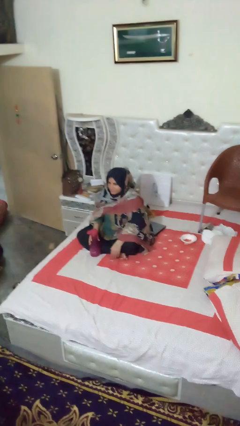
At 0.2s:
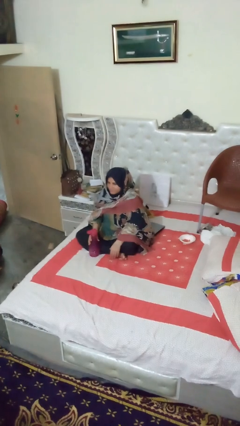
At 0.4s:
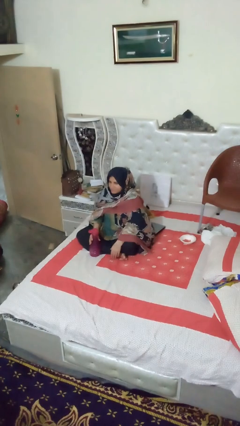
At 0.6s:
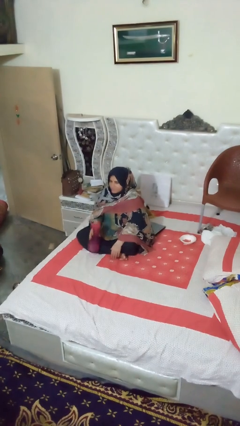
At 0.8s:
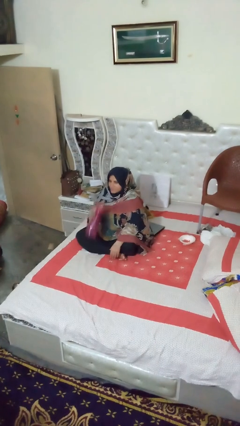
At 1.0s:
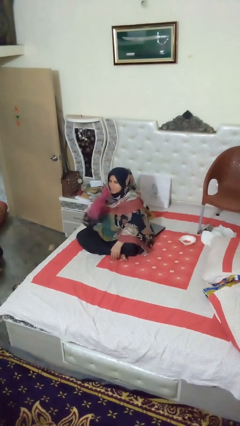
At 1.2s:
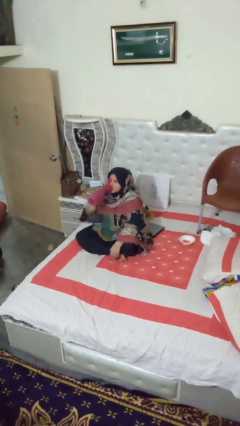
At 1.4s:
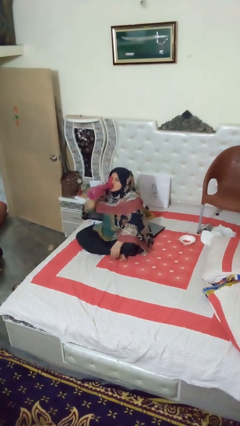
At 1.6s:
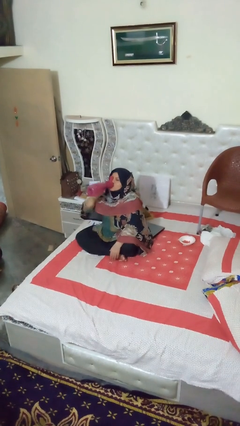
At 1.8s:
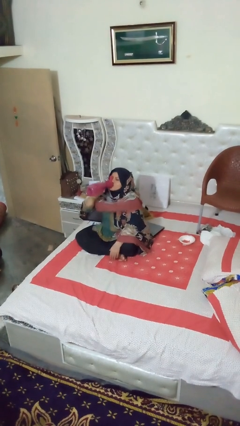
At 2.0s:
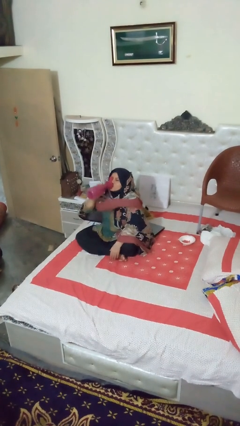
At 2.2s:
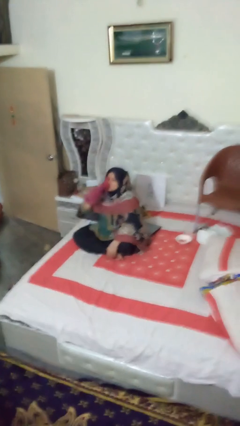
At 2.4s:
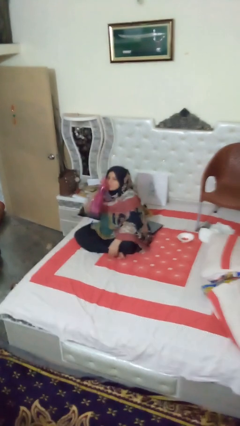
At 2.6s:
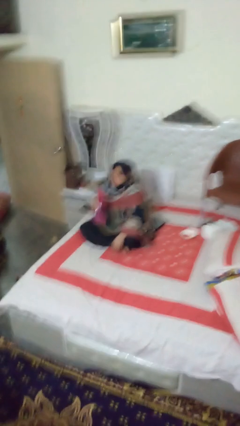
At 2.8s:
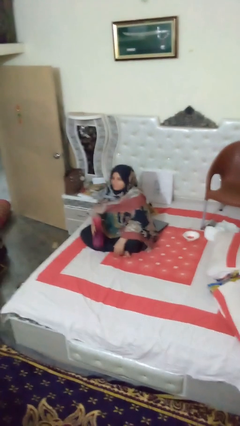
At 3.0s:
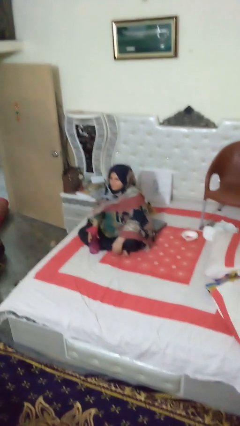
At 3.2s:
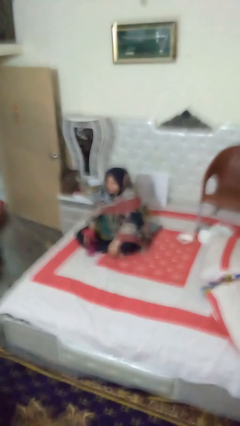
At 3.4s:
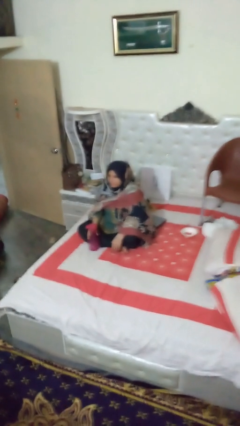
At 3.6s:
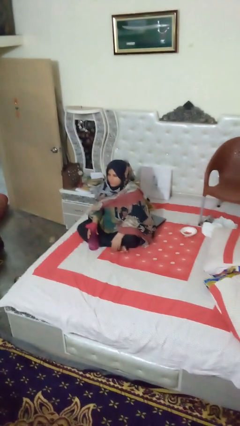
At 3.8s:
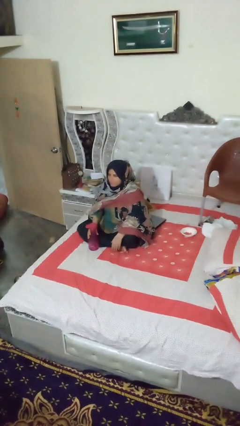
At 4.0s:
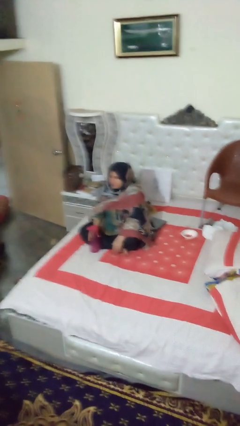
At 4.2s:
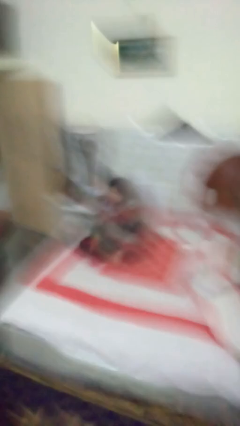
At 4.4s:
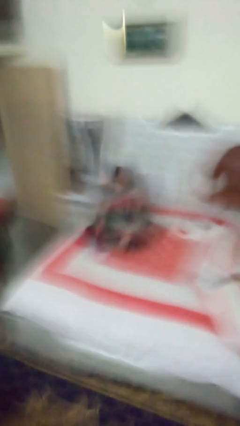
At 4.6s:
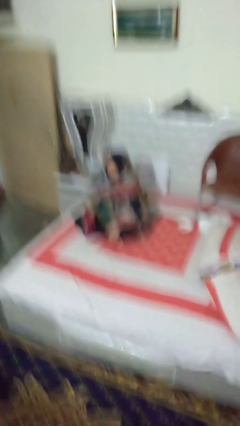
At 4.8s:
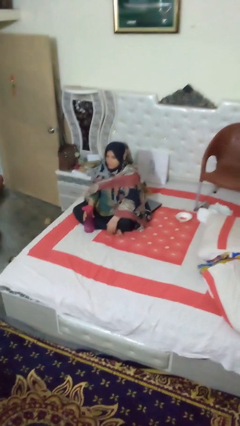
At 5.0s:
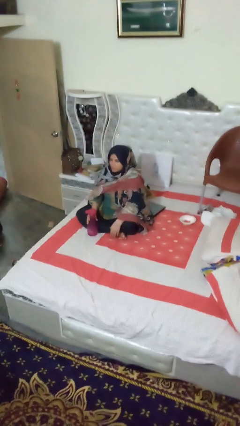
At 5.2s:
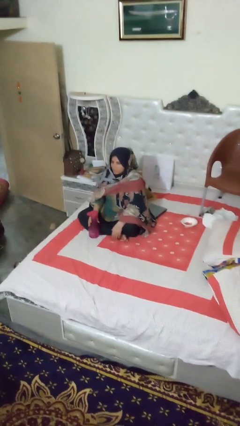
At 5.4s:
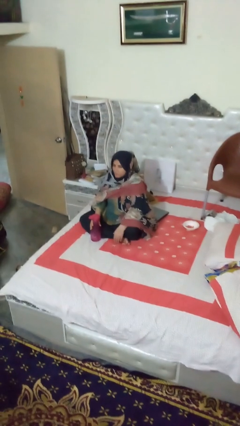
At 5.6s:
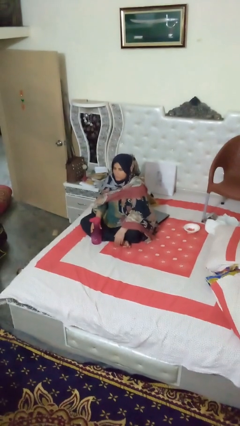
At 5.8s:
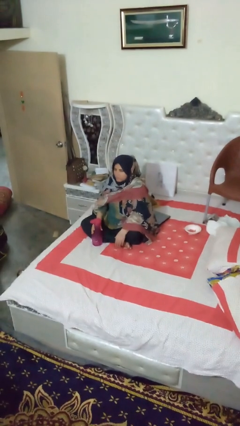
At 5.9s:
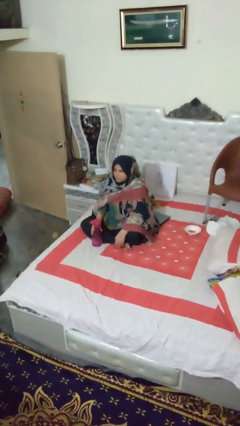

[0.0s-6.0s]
person drinks from bottle

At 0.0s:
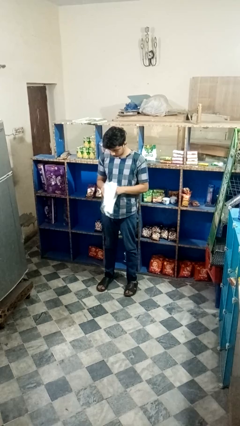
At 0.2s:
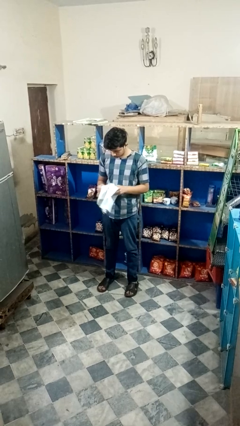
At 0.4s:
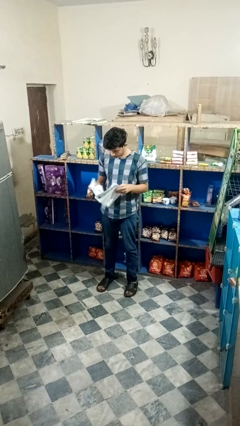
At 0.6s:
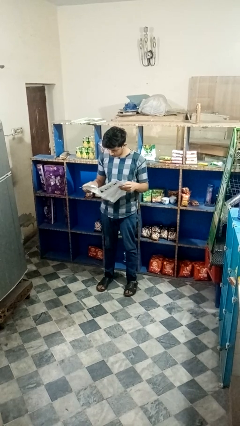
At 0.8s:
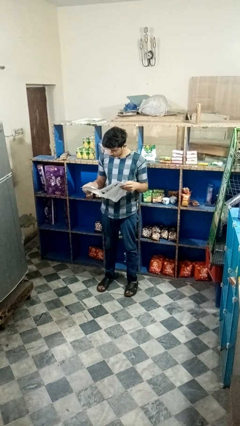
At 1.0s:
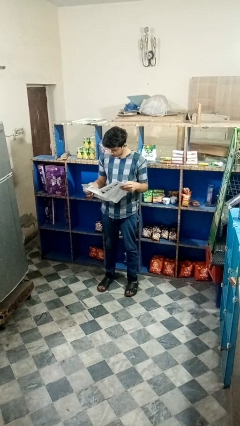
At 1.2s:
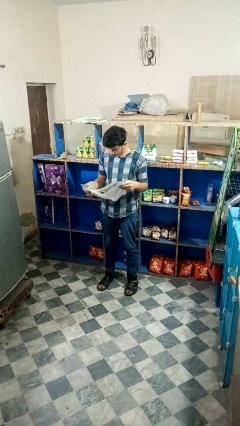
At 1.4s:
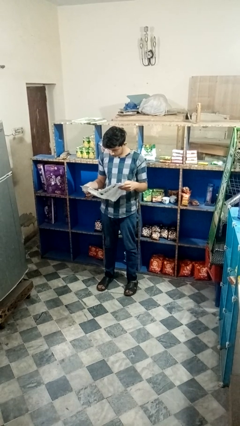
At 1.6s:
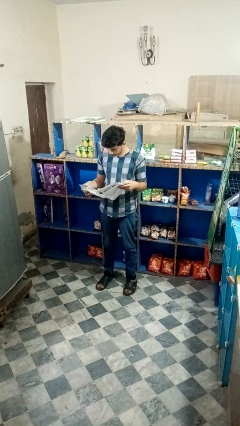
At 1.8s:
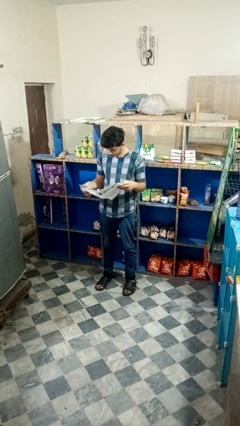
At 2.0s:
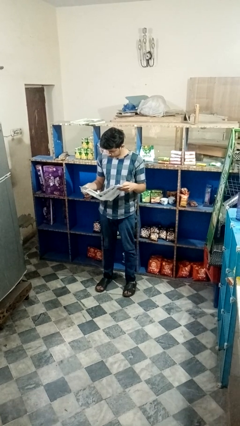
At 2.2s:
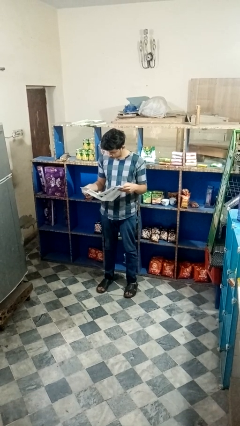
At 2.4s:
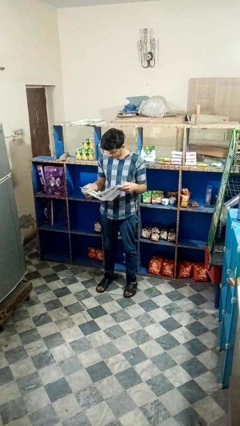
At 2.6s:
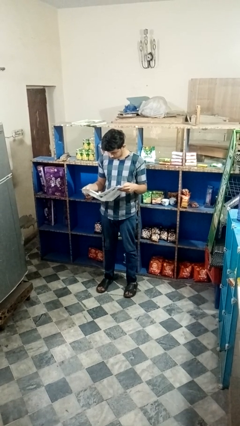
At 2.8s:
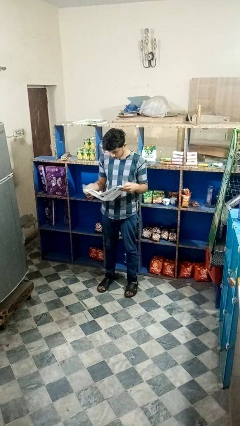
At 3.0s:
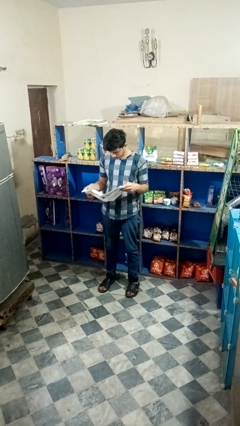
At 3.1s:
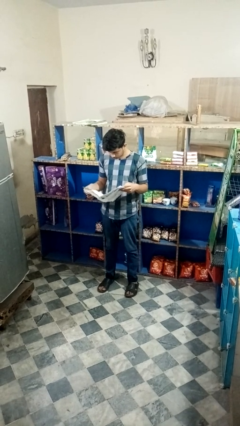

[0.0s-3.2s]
person reads newspaper

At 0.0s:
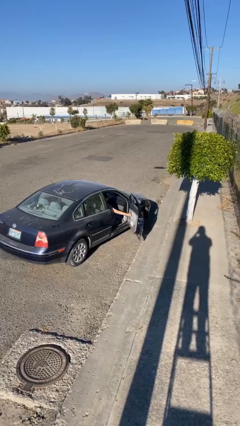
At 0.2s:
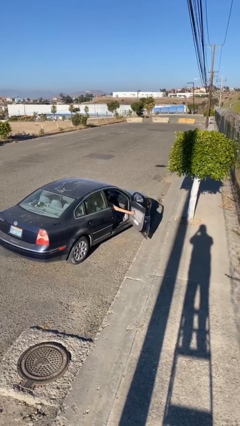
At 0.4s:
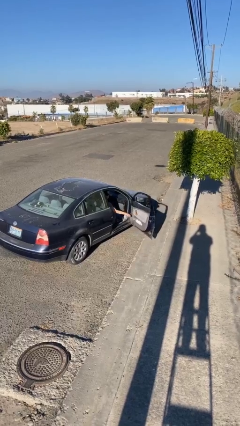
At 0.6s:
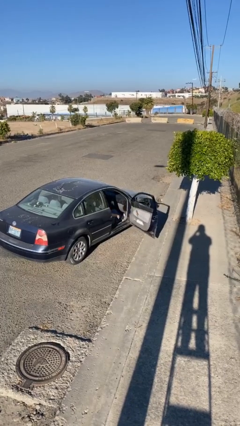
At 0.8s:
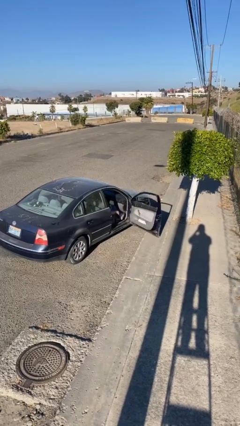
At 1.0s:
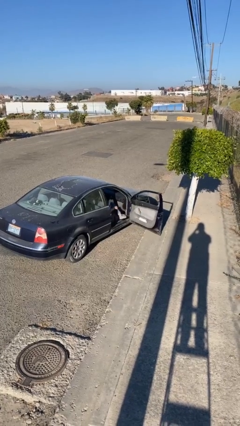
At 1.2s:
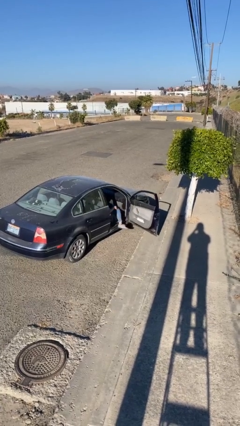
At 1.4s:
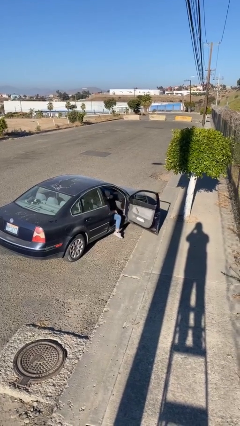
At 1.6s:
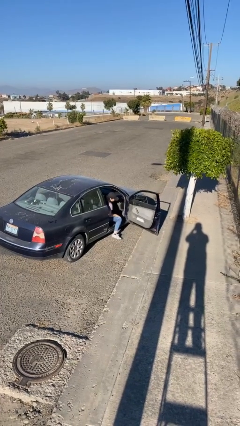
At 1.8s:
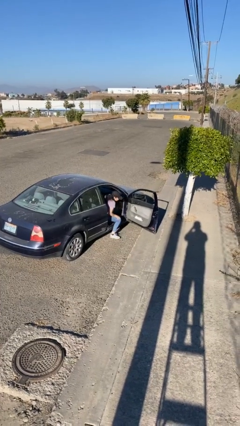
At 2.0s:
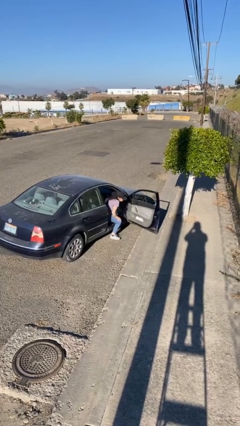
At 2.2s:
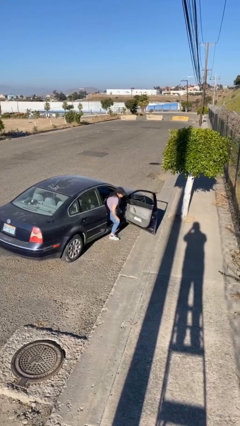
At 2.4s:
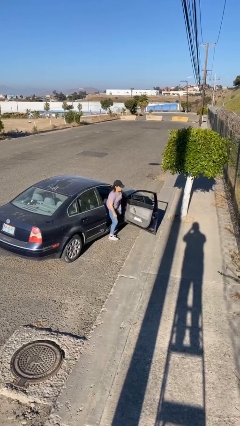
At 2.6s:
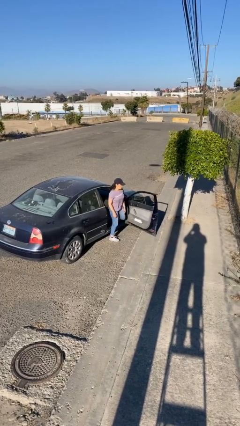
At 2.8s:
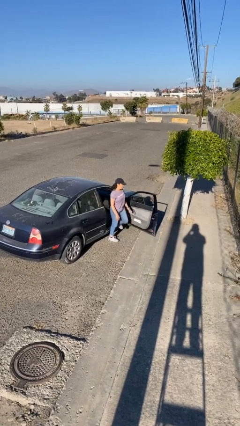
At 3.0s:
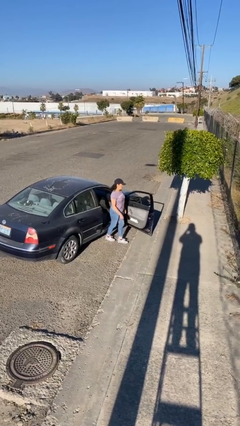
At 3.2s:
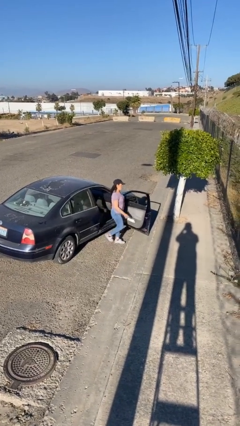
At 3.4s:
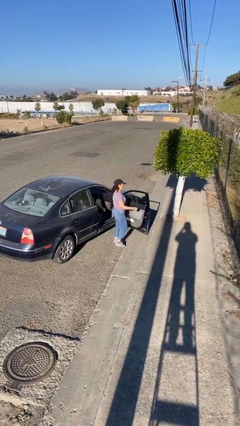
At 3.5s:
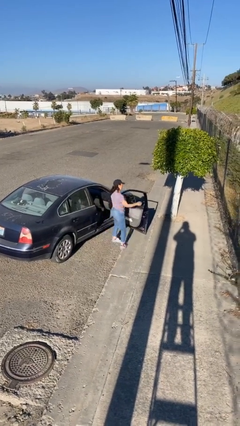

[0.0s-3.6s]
person exits car

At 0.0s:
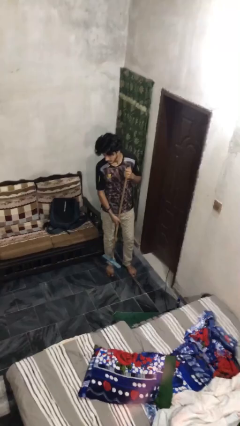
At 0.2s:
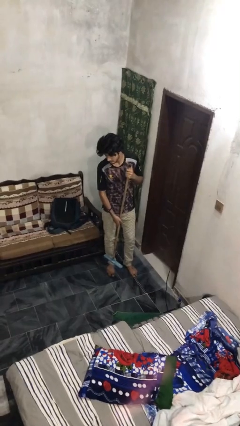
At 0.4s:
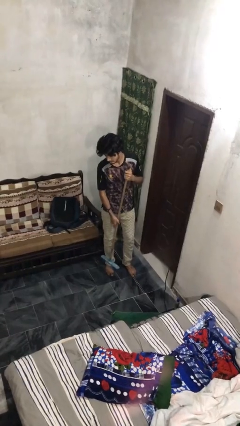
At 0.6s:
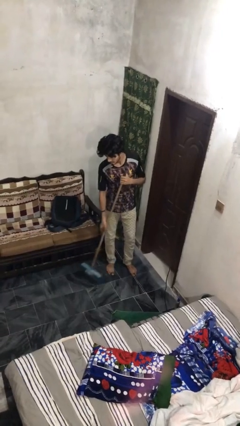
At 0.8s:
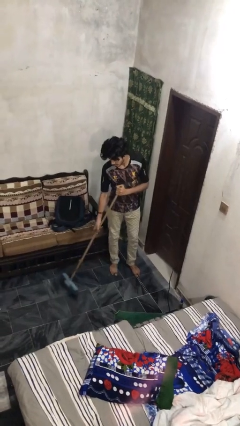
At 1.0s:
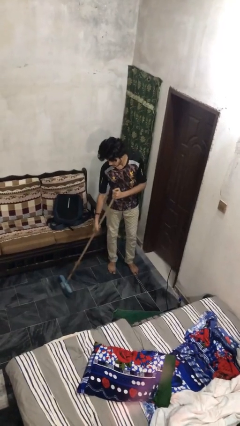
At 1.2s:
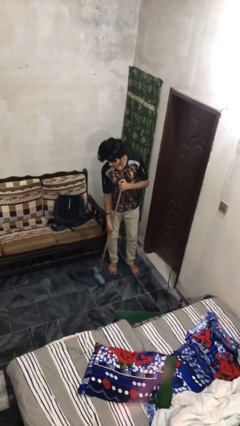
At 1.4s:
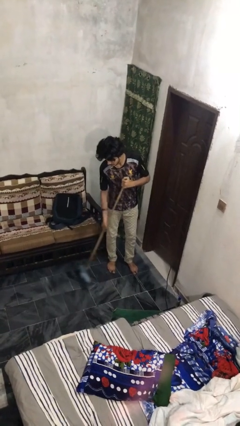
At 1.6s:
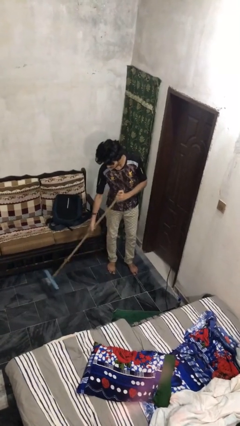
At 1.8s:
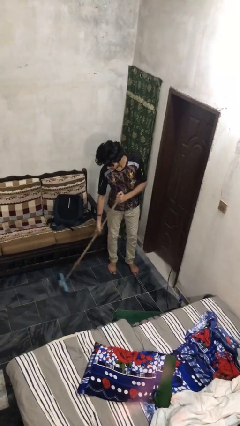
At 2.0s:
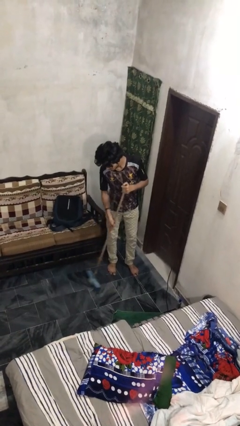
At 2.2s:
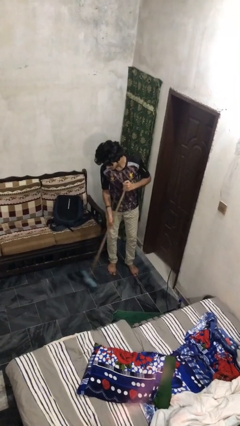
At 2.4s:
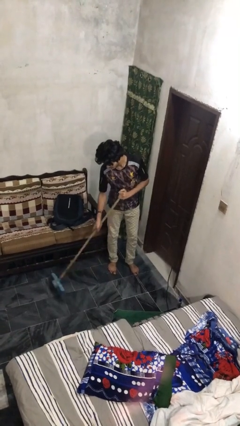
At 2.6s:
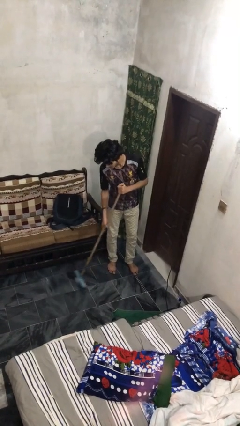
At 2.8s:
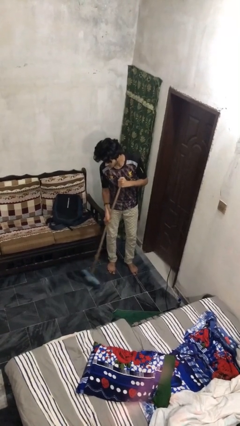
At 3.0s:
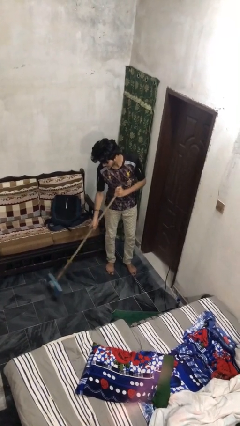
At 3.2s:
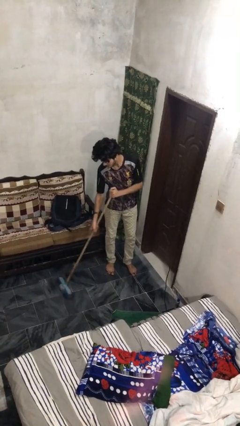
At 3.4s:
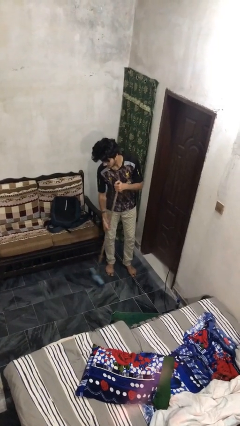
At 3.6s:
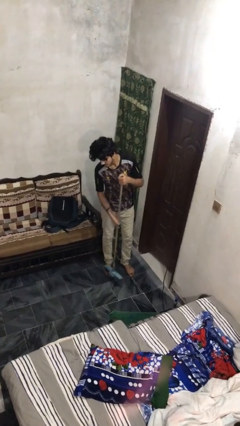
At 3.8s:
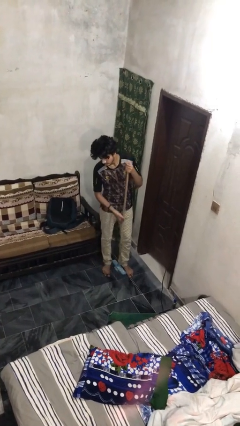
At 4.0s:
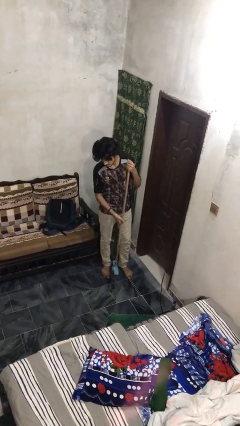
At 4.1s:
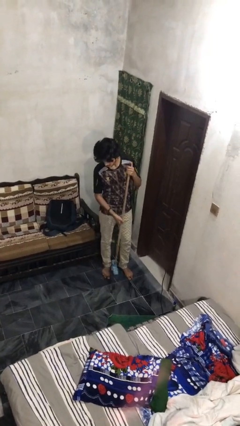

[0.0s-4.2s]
person sweeps floor

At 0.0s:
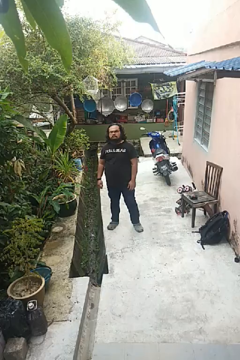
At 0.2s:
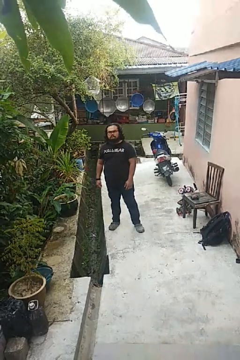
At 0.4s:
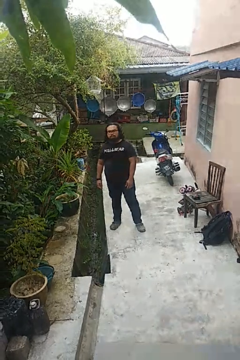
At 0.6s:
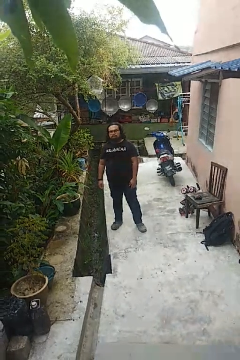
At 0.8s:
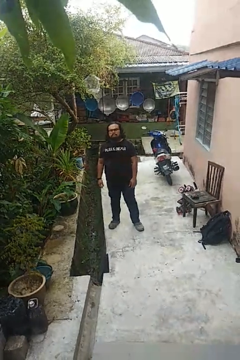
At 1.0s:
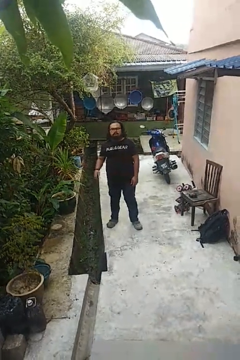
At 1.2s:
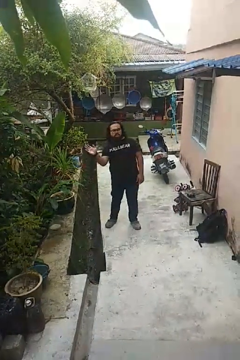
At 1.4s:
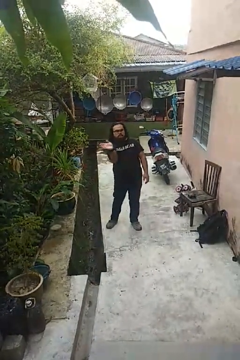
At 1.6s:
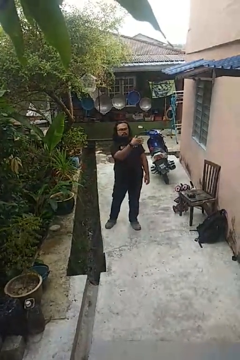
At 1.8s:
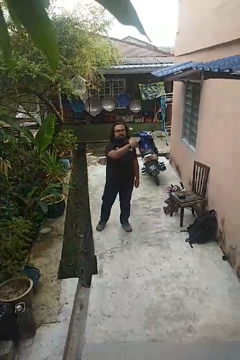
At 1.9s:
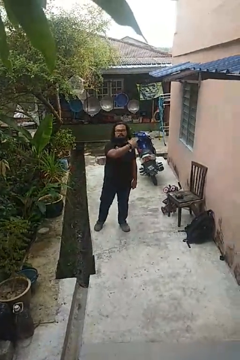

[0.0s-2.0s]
person gestures swipe left
